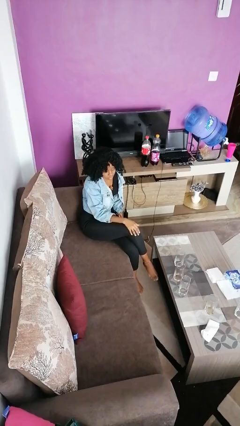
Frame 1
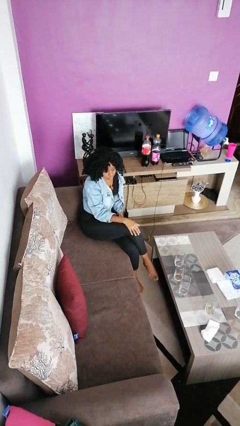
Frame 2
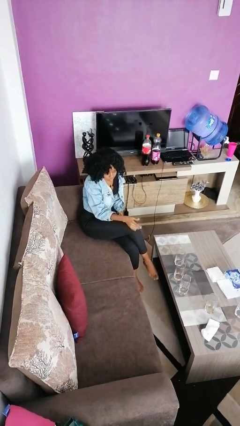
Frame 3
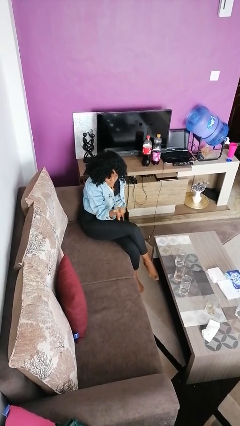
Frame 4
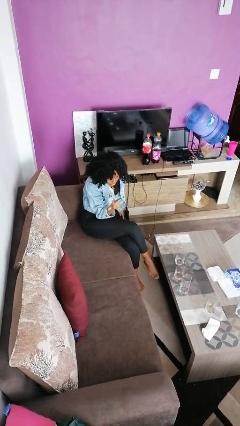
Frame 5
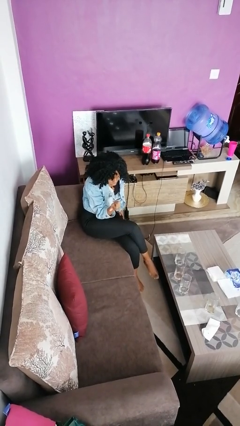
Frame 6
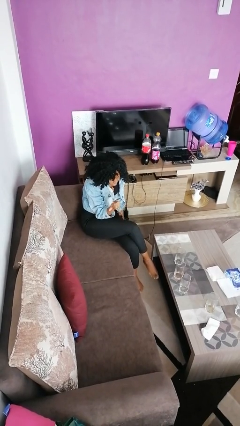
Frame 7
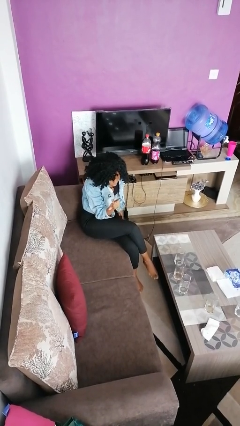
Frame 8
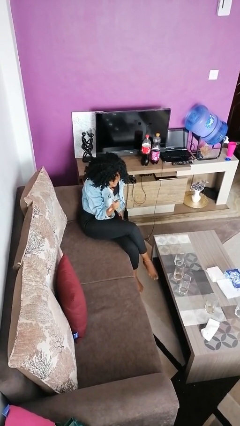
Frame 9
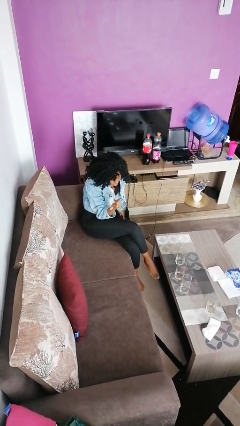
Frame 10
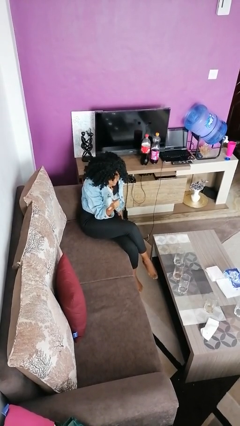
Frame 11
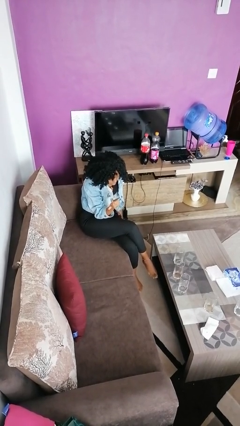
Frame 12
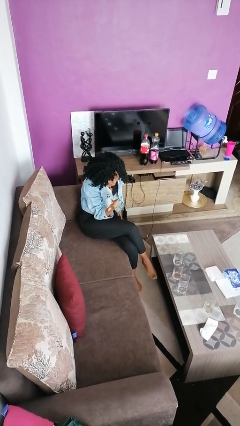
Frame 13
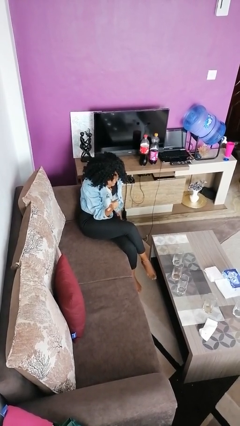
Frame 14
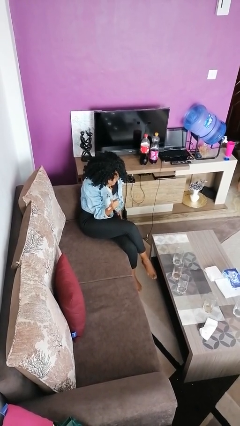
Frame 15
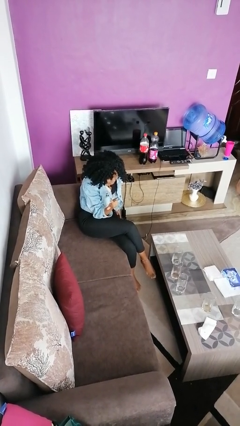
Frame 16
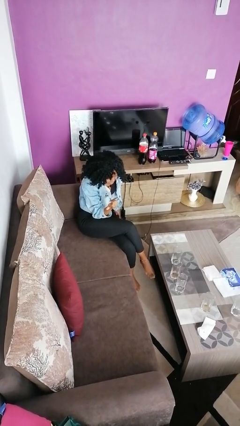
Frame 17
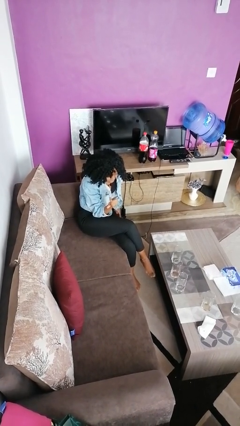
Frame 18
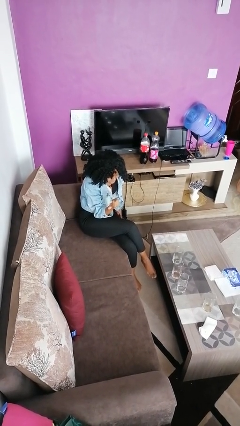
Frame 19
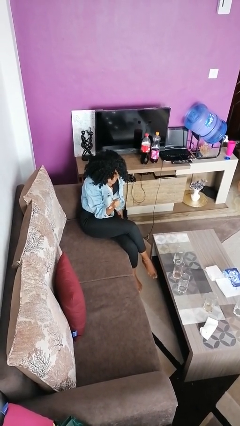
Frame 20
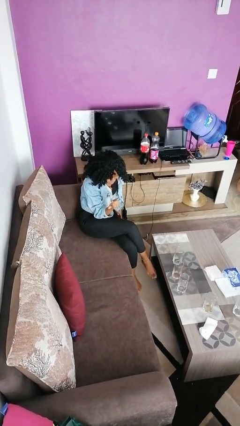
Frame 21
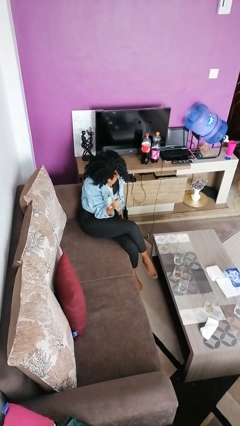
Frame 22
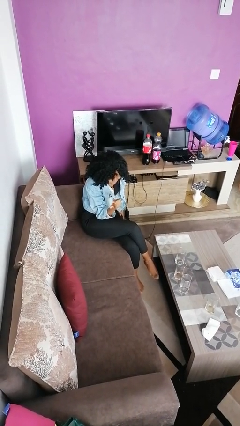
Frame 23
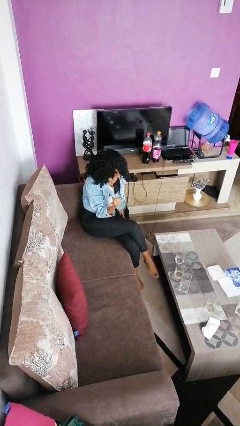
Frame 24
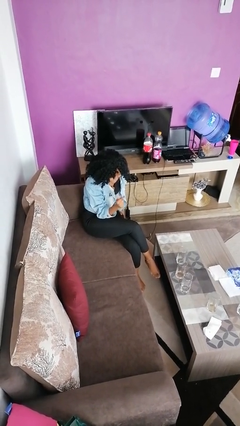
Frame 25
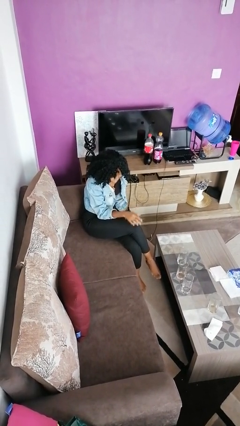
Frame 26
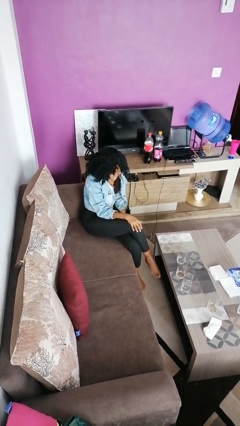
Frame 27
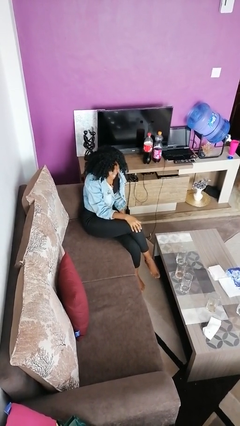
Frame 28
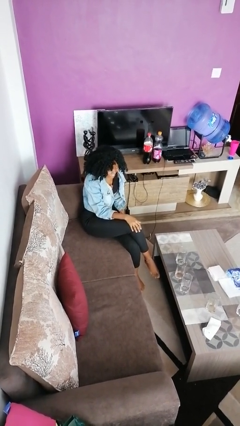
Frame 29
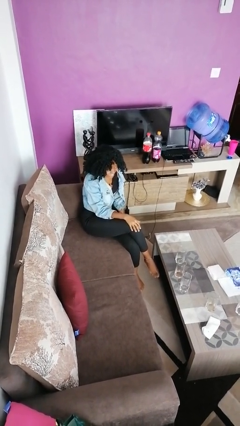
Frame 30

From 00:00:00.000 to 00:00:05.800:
person gestures come here

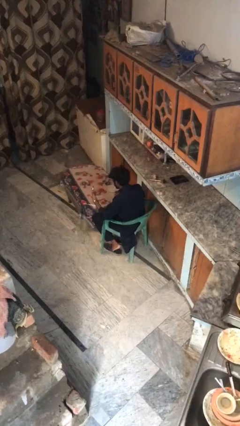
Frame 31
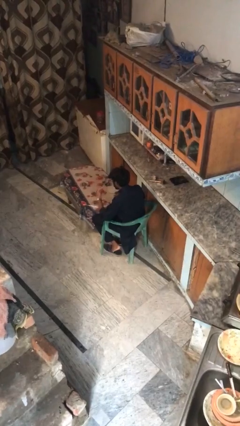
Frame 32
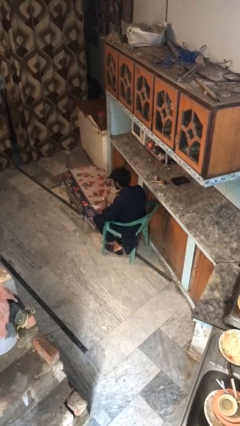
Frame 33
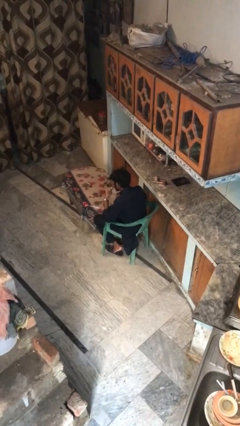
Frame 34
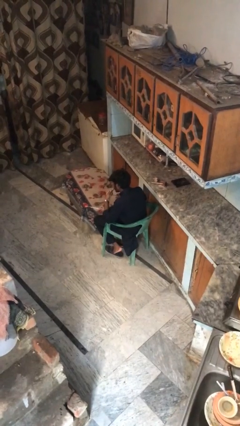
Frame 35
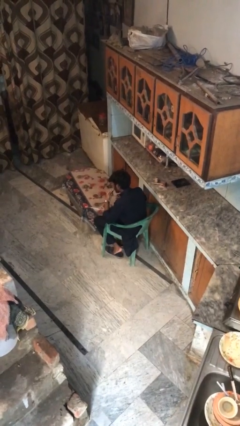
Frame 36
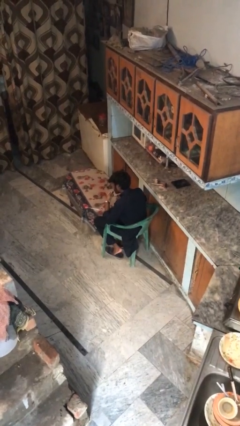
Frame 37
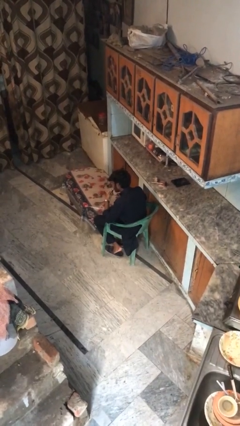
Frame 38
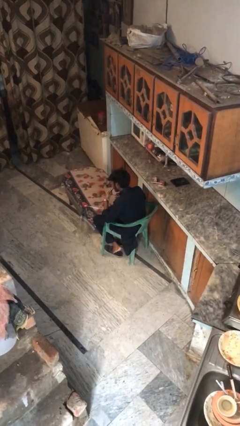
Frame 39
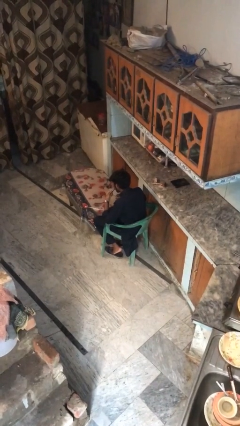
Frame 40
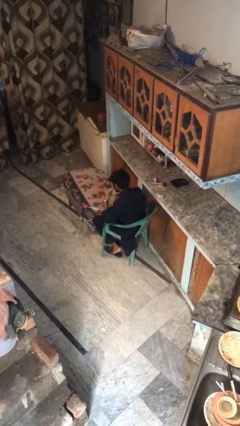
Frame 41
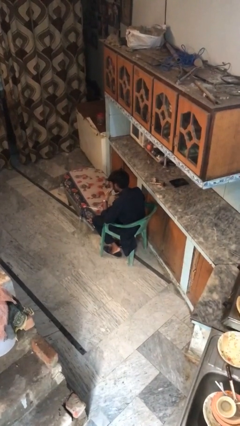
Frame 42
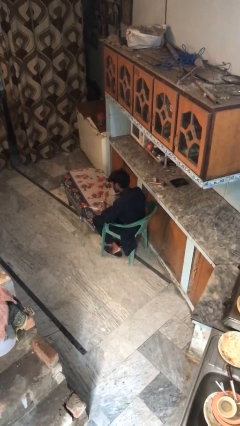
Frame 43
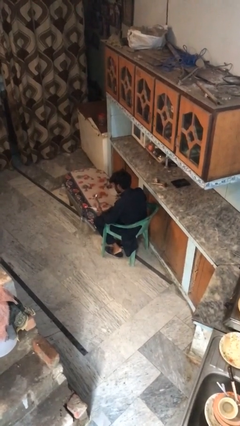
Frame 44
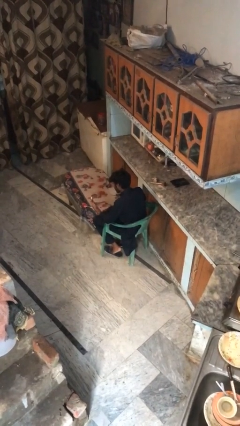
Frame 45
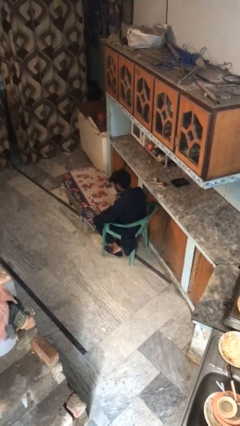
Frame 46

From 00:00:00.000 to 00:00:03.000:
person applies lip makeup

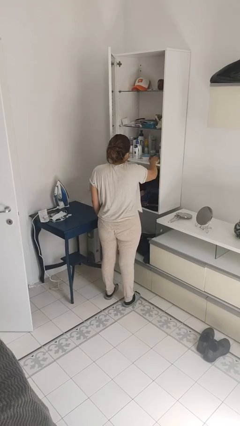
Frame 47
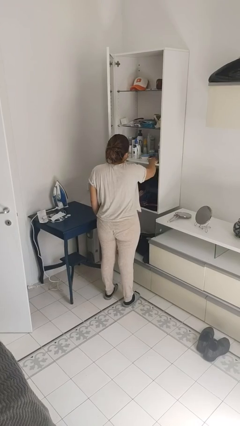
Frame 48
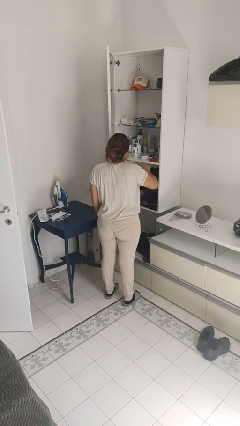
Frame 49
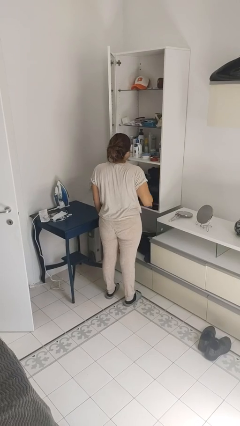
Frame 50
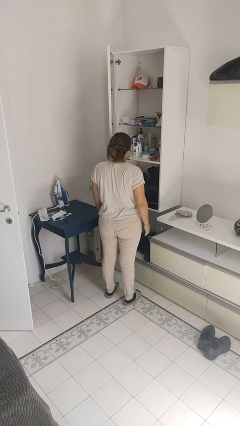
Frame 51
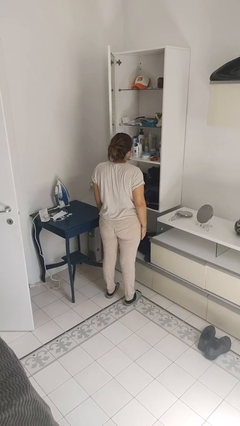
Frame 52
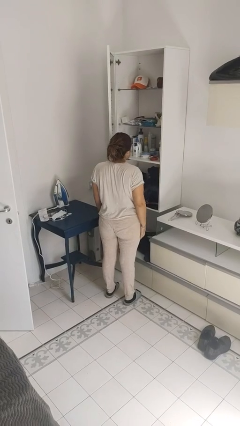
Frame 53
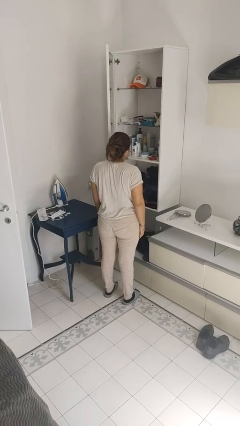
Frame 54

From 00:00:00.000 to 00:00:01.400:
person puts down object on shelf

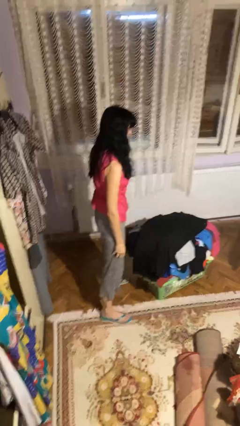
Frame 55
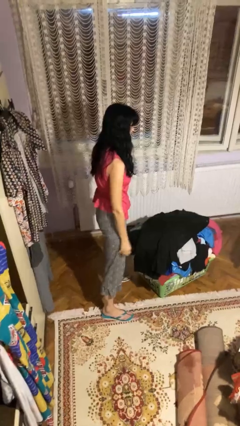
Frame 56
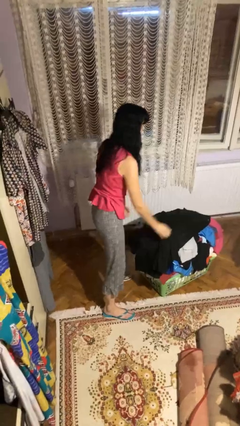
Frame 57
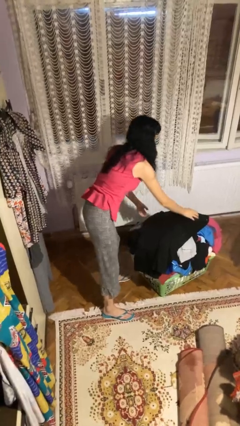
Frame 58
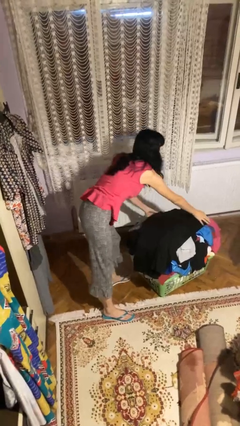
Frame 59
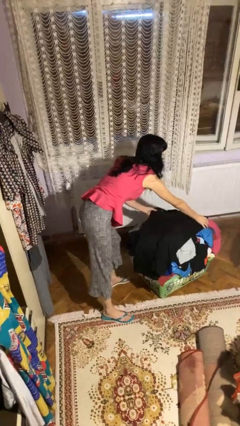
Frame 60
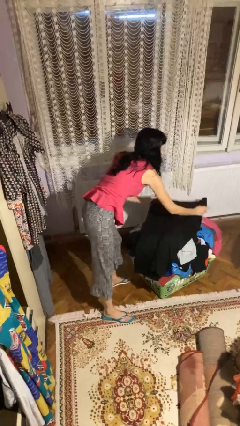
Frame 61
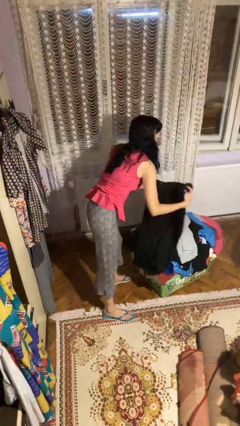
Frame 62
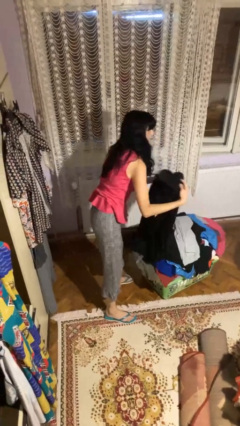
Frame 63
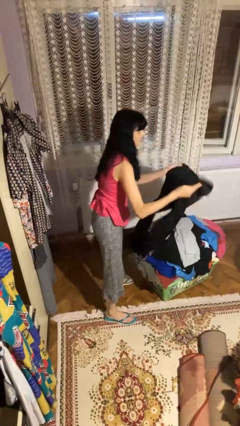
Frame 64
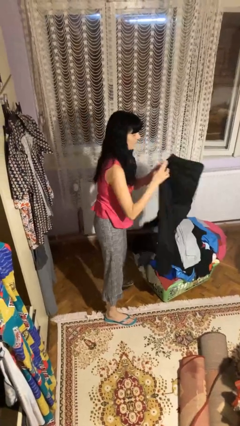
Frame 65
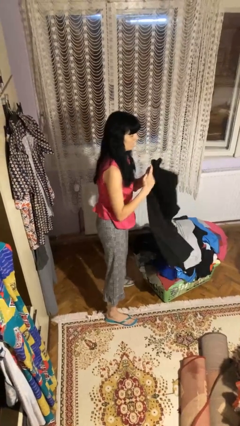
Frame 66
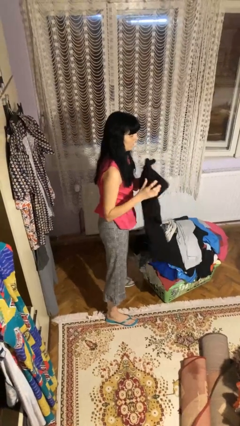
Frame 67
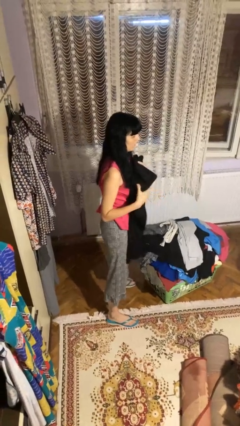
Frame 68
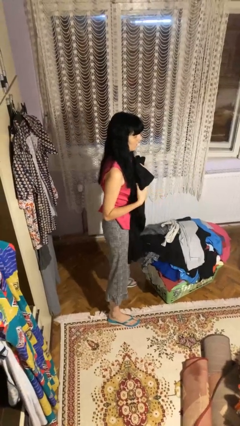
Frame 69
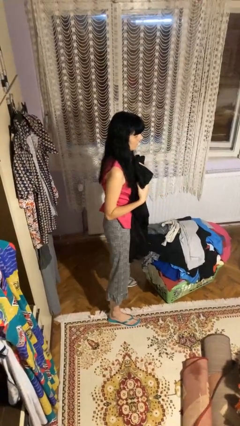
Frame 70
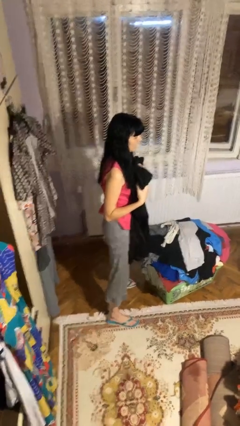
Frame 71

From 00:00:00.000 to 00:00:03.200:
person folds pants

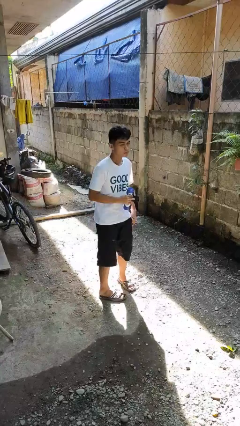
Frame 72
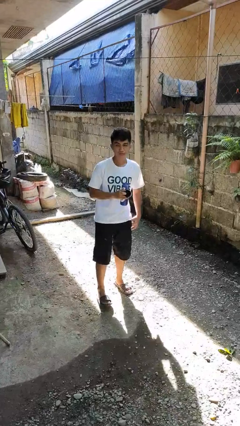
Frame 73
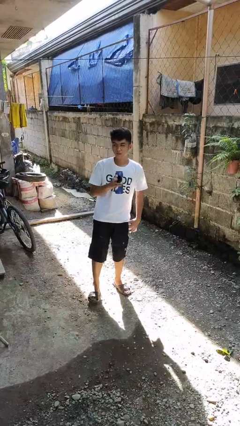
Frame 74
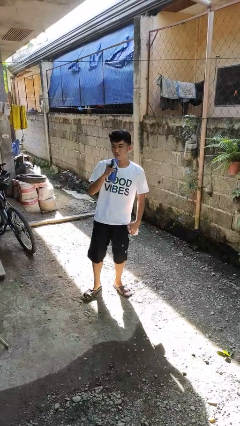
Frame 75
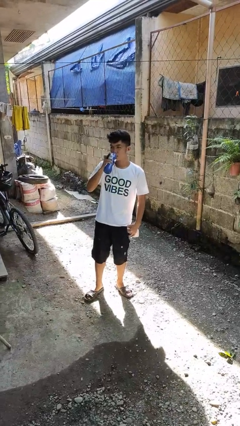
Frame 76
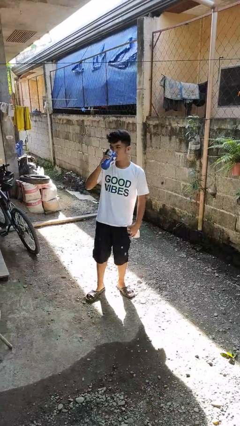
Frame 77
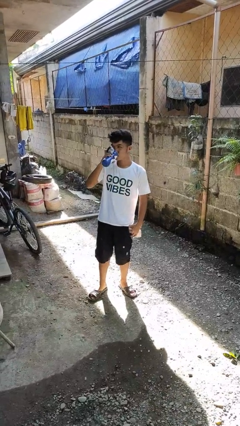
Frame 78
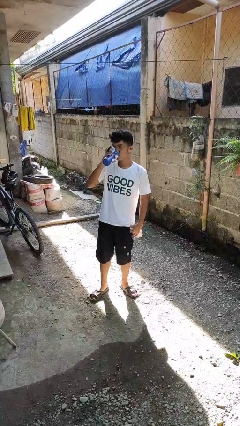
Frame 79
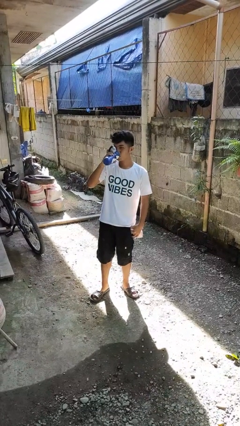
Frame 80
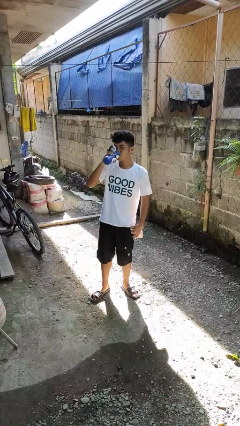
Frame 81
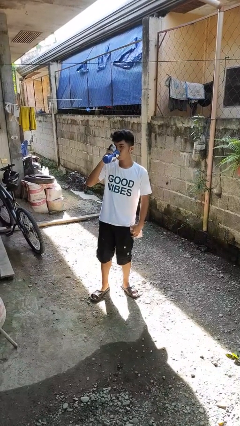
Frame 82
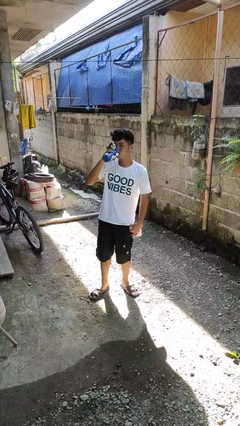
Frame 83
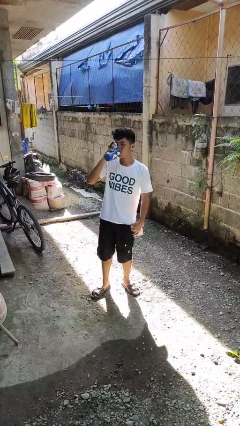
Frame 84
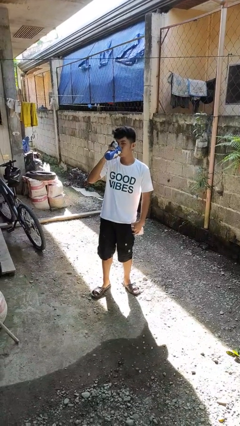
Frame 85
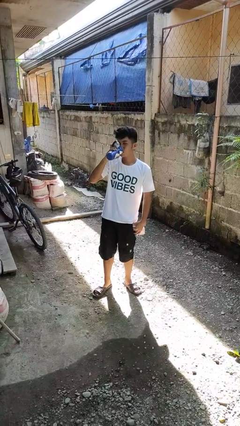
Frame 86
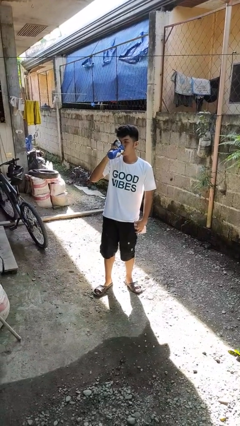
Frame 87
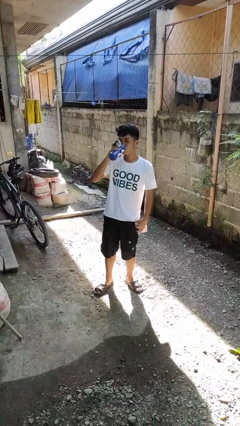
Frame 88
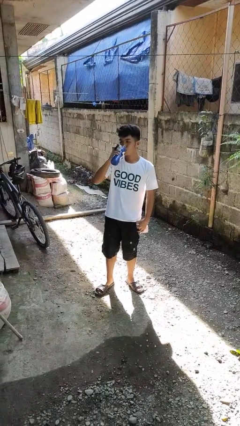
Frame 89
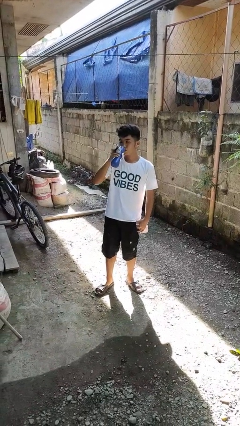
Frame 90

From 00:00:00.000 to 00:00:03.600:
person drinks from bottle

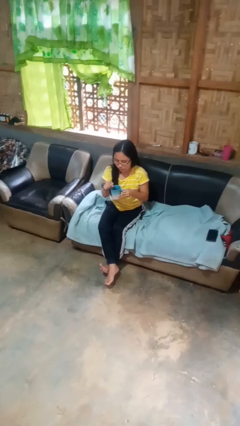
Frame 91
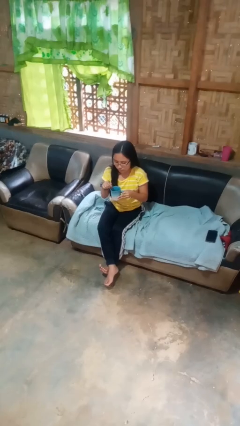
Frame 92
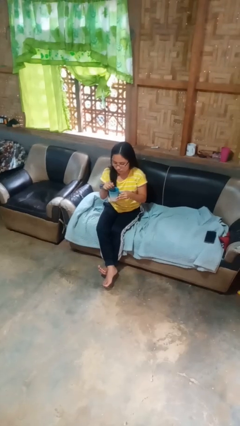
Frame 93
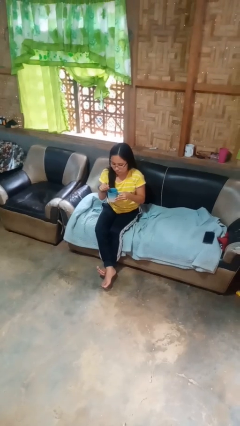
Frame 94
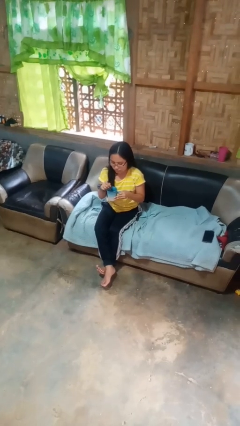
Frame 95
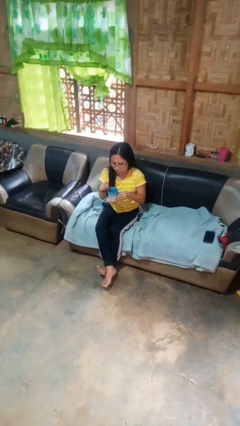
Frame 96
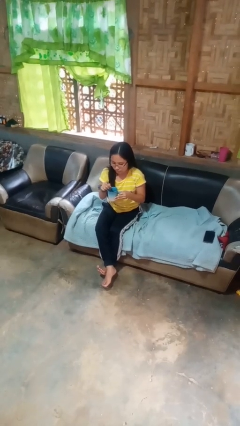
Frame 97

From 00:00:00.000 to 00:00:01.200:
person stirs mug
